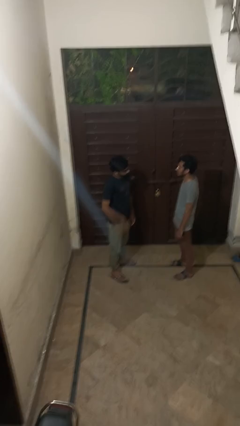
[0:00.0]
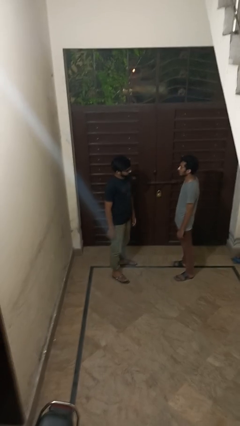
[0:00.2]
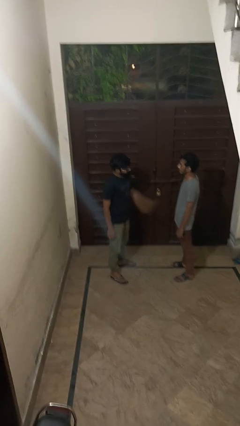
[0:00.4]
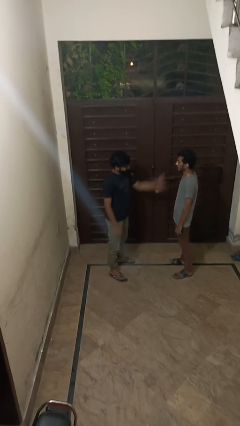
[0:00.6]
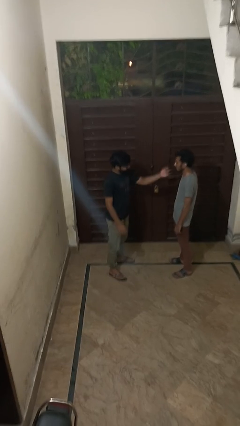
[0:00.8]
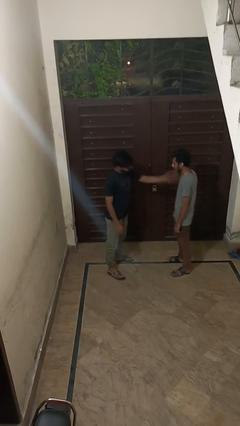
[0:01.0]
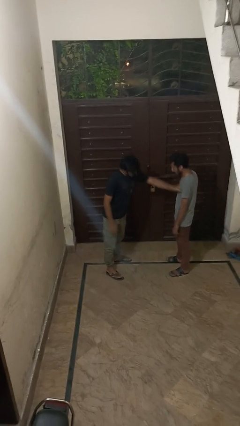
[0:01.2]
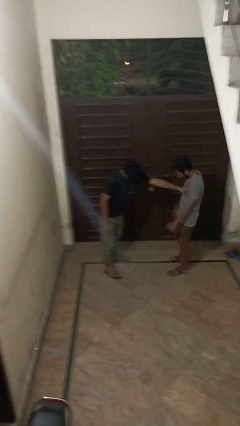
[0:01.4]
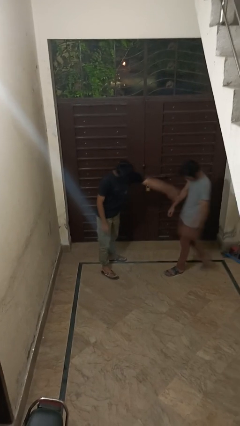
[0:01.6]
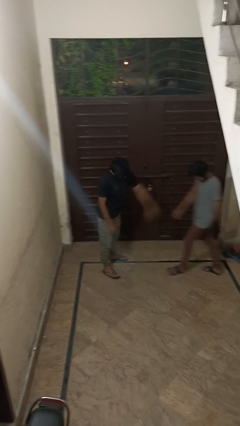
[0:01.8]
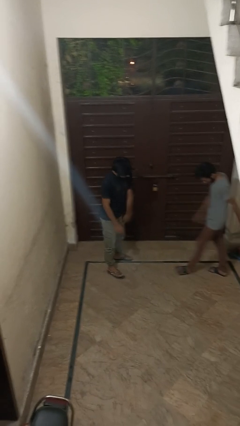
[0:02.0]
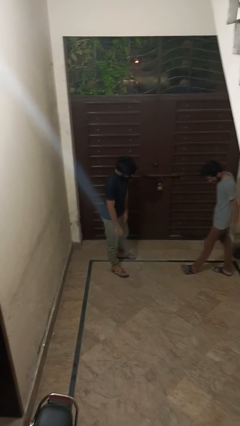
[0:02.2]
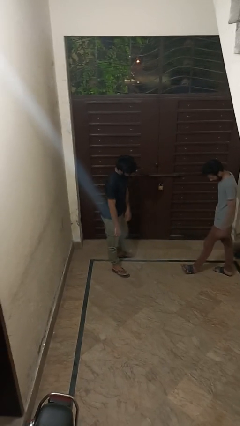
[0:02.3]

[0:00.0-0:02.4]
person shoves person

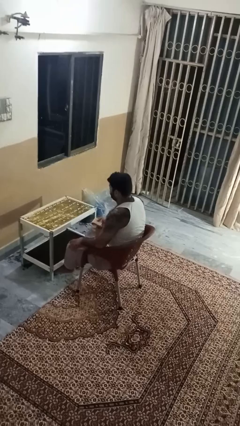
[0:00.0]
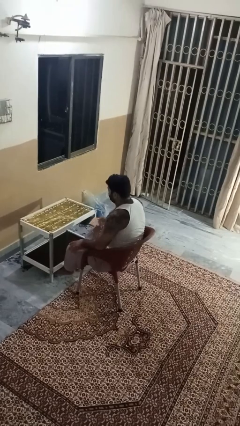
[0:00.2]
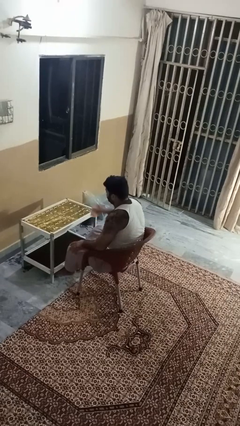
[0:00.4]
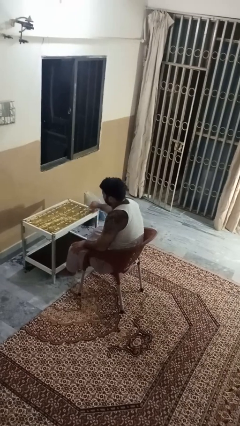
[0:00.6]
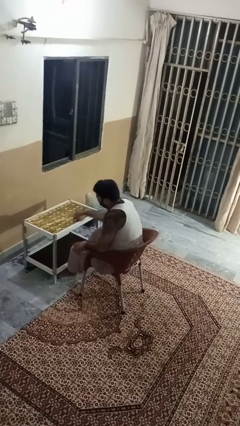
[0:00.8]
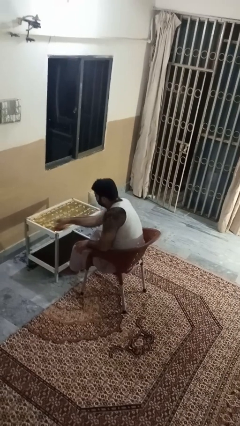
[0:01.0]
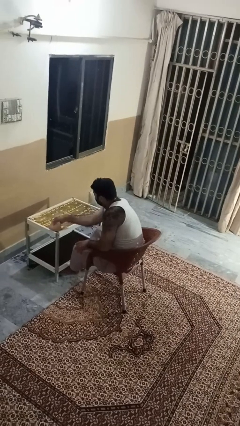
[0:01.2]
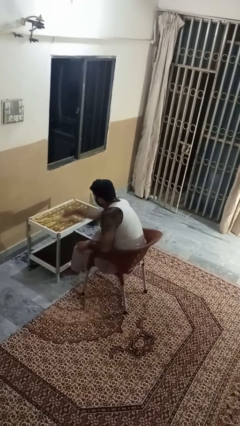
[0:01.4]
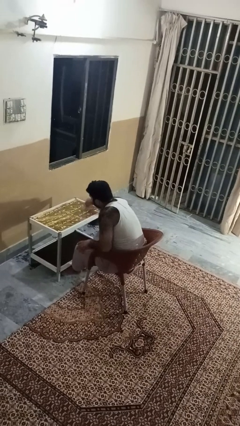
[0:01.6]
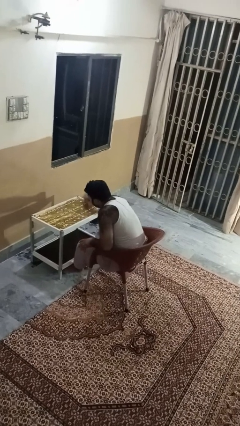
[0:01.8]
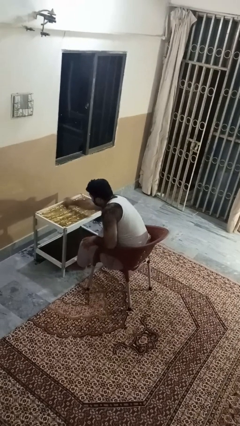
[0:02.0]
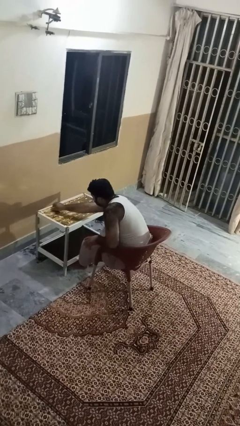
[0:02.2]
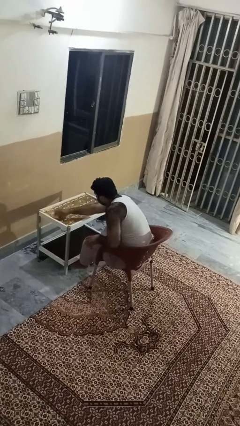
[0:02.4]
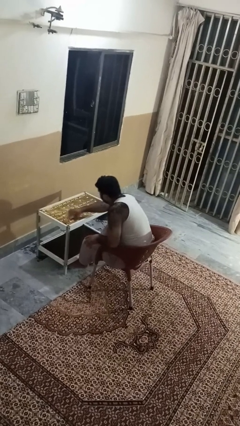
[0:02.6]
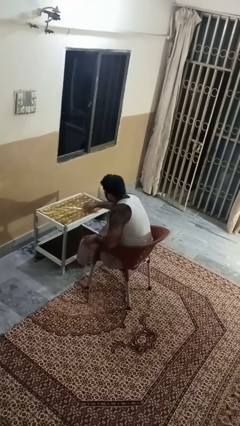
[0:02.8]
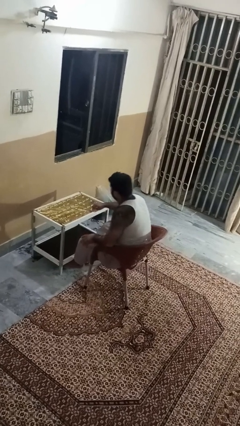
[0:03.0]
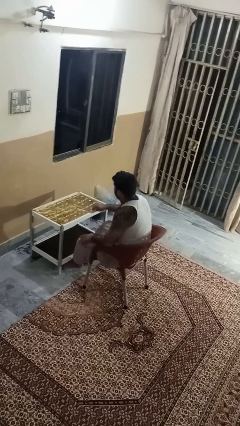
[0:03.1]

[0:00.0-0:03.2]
person cleans table with rag

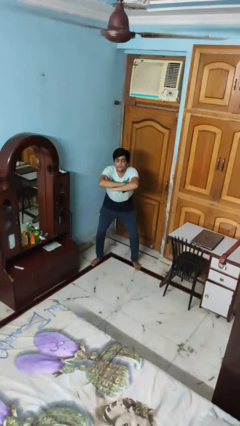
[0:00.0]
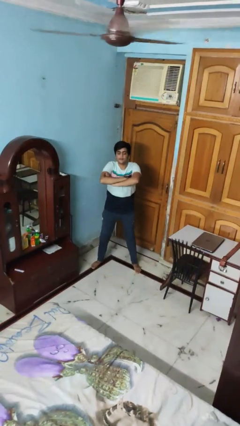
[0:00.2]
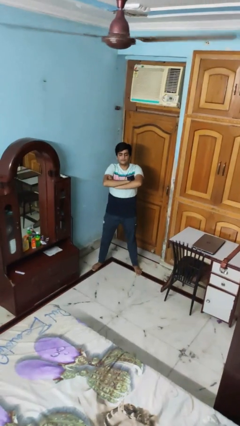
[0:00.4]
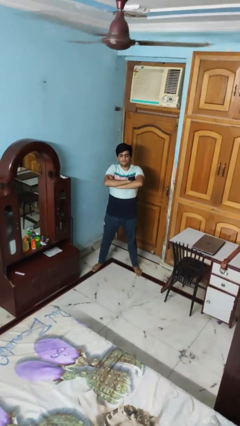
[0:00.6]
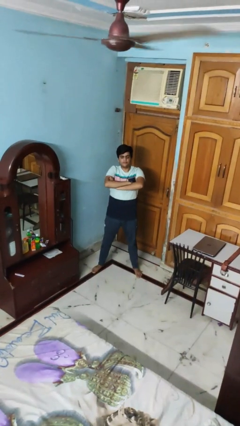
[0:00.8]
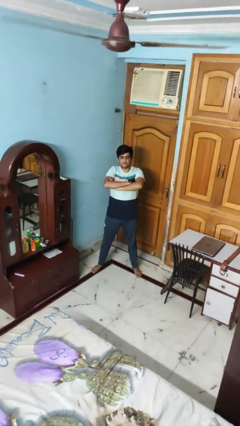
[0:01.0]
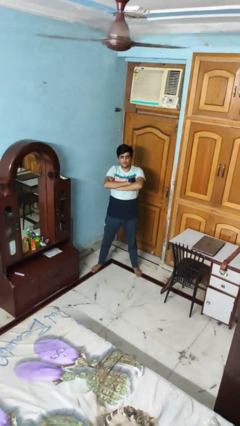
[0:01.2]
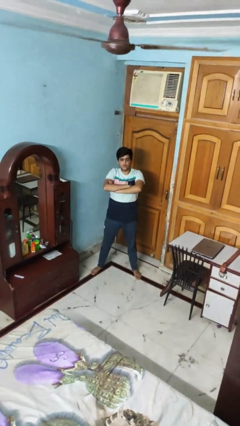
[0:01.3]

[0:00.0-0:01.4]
person stands up

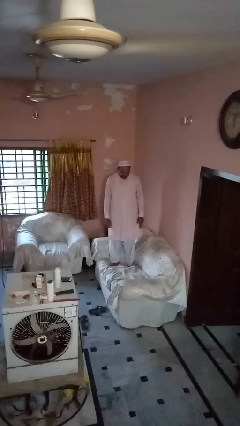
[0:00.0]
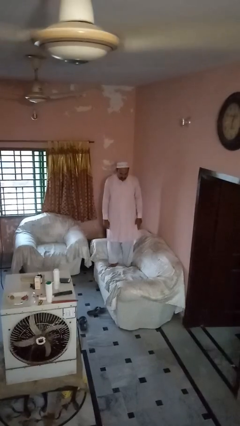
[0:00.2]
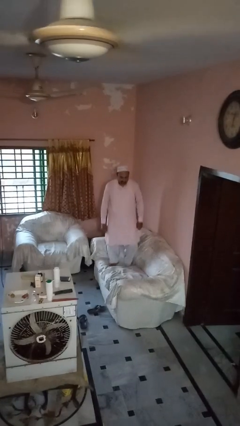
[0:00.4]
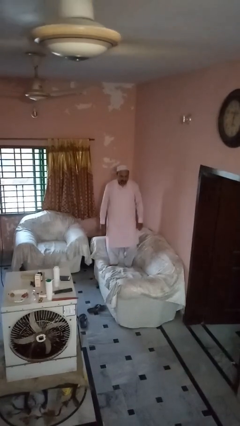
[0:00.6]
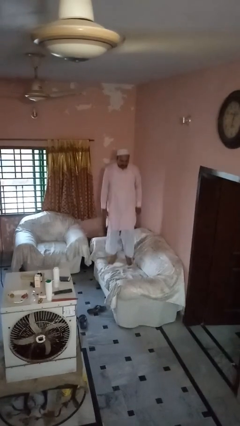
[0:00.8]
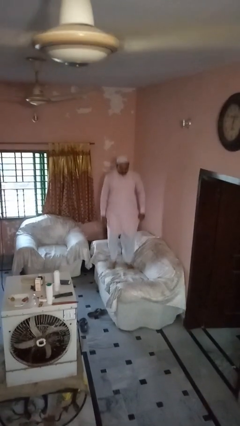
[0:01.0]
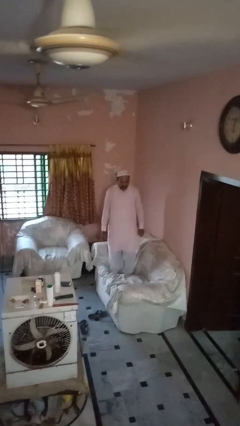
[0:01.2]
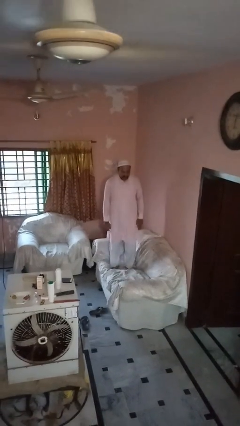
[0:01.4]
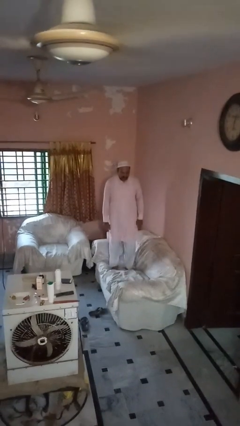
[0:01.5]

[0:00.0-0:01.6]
person jumps on couch

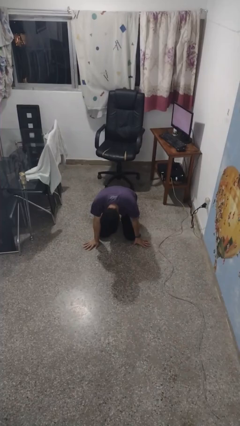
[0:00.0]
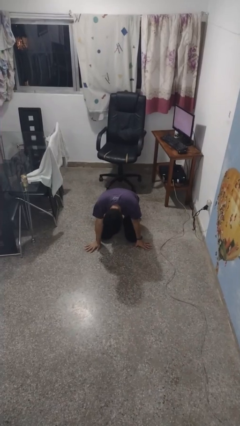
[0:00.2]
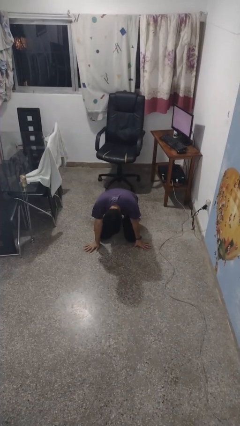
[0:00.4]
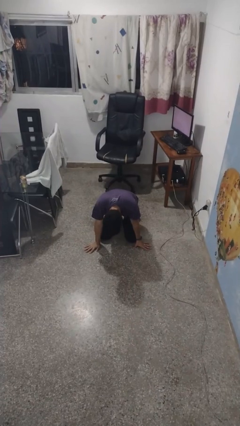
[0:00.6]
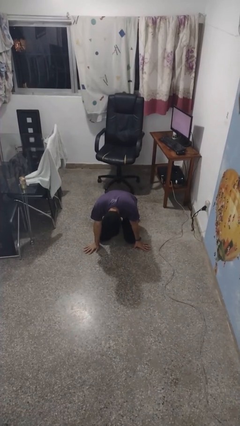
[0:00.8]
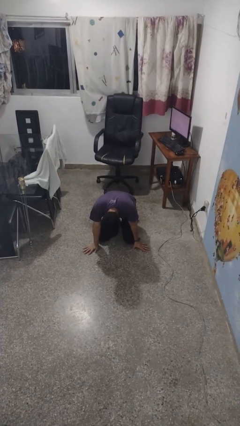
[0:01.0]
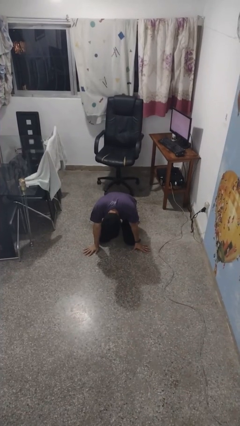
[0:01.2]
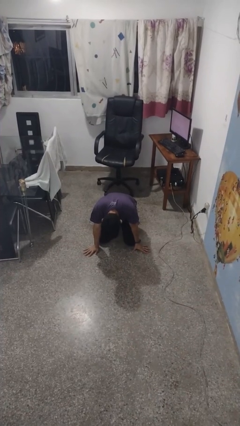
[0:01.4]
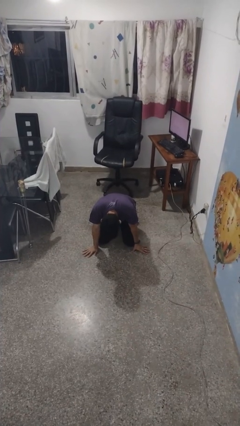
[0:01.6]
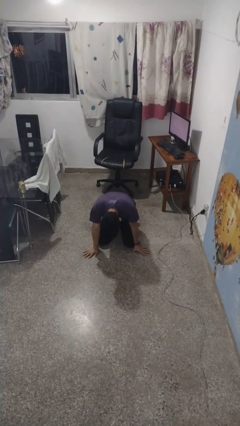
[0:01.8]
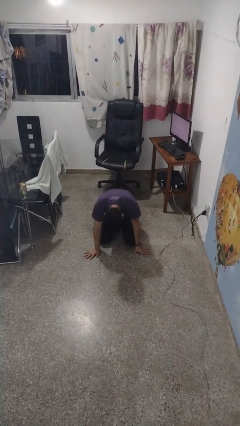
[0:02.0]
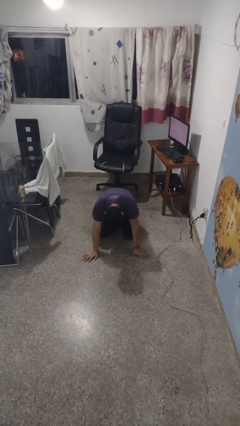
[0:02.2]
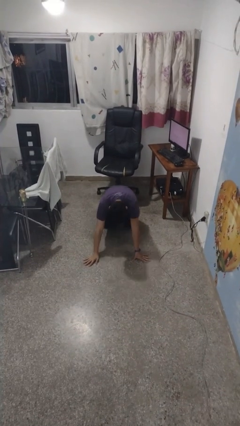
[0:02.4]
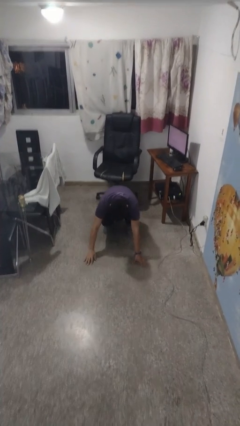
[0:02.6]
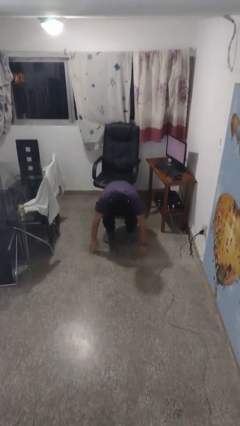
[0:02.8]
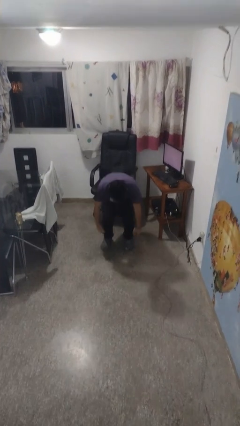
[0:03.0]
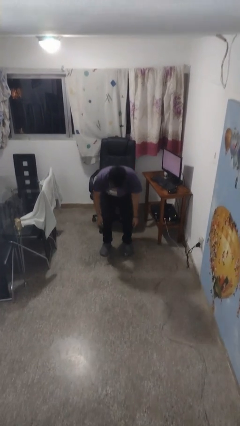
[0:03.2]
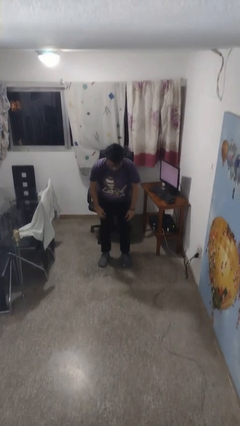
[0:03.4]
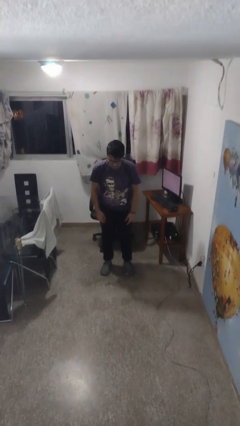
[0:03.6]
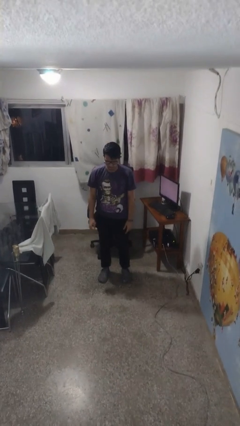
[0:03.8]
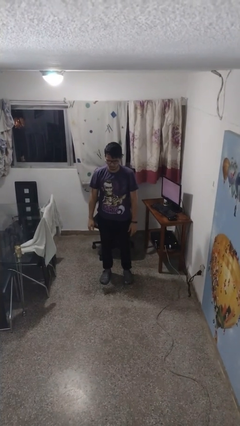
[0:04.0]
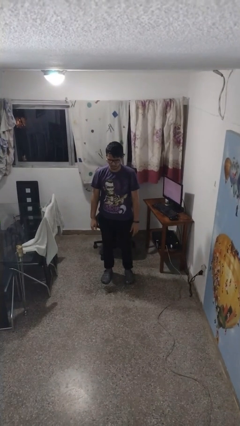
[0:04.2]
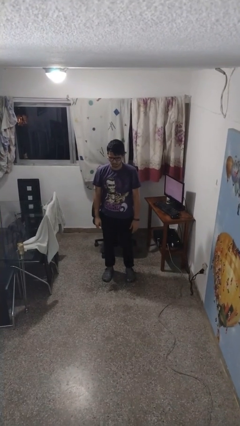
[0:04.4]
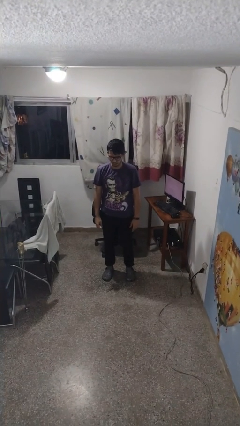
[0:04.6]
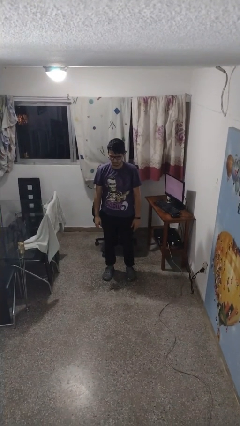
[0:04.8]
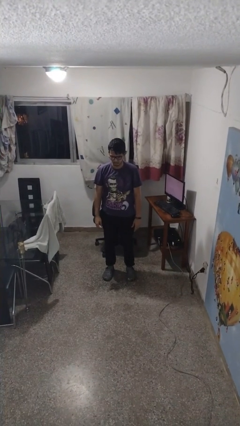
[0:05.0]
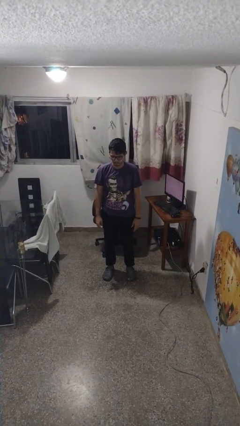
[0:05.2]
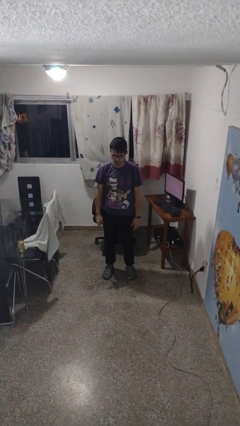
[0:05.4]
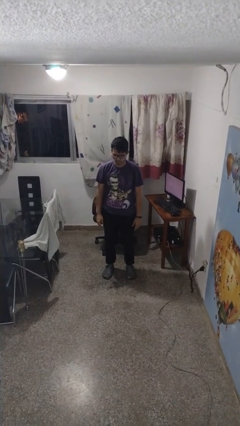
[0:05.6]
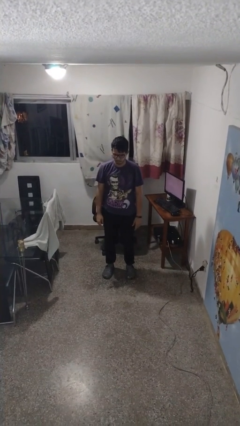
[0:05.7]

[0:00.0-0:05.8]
person stands up from floor

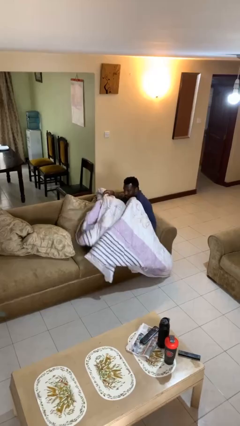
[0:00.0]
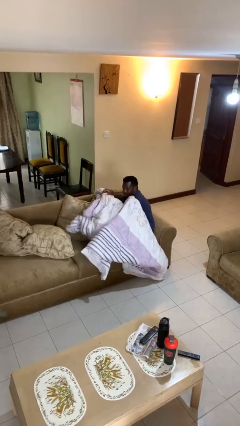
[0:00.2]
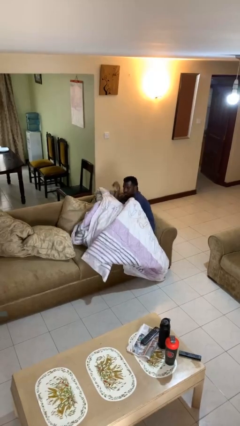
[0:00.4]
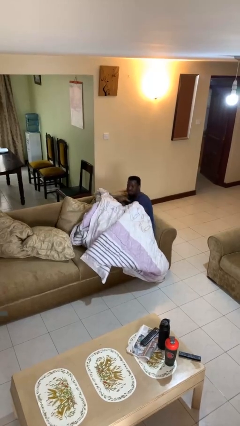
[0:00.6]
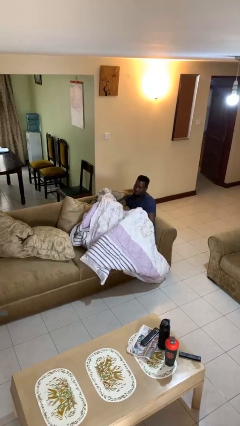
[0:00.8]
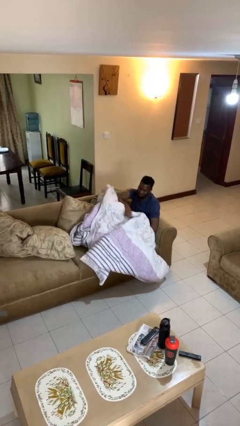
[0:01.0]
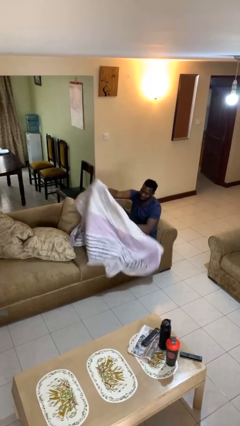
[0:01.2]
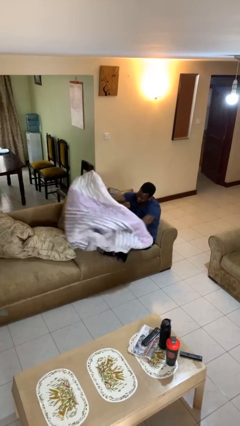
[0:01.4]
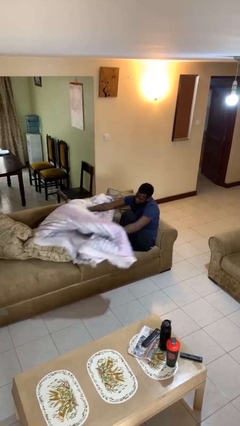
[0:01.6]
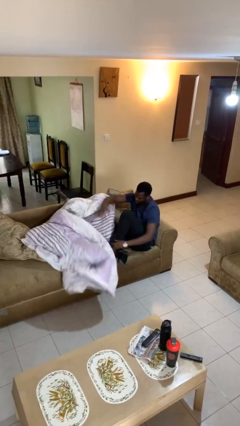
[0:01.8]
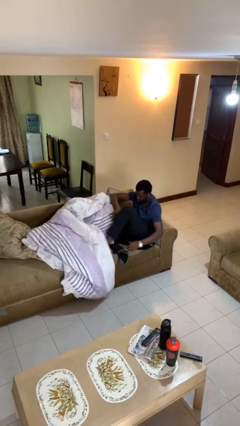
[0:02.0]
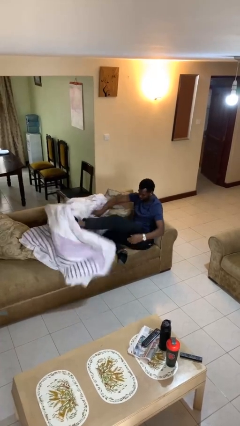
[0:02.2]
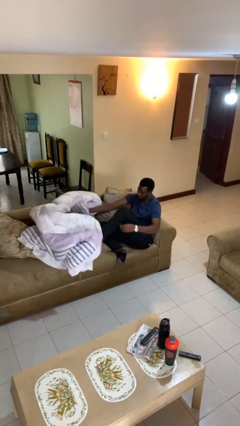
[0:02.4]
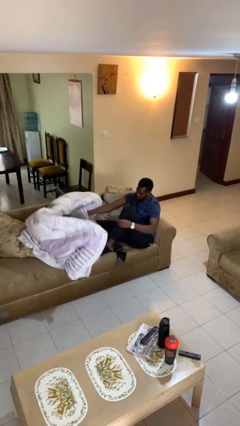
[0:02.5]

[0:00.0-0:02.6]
person uncovers with blanket

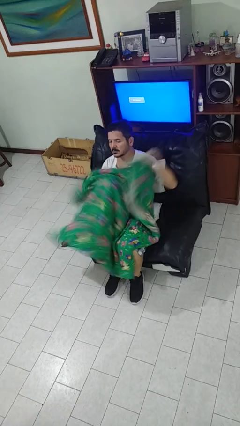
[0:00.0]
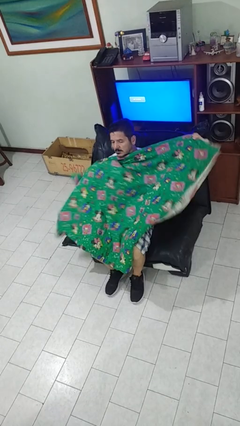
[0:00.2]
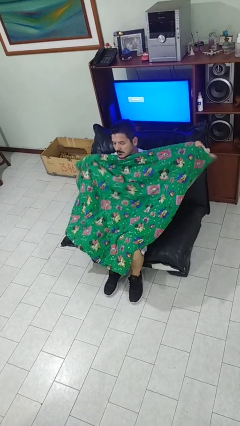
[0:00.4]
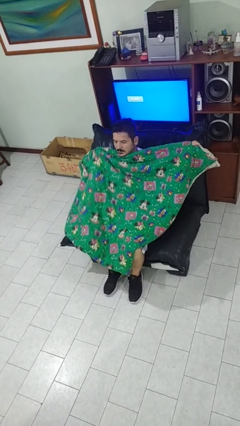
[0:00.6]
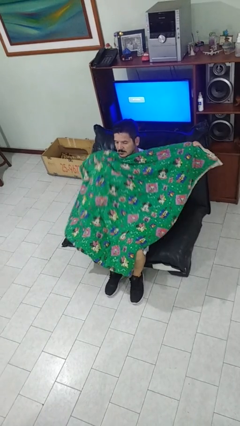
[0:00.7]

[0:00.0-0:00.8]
person covers with blanket
